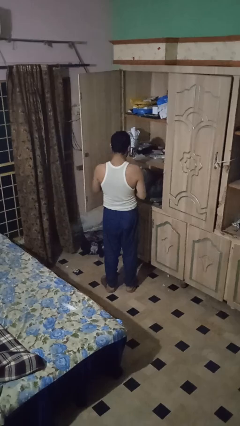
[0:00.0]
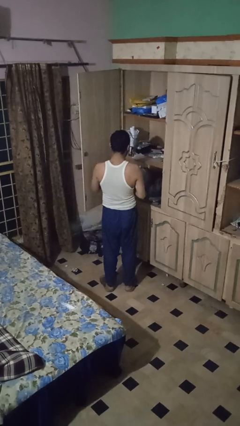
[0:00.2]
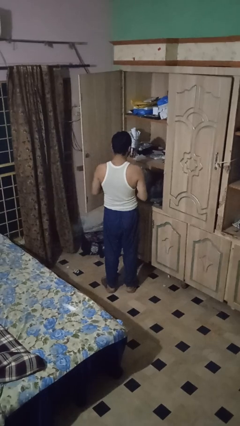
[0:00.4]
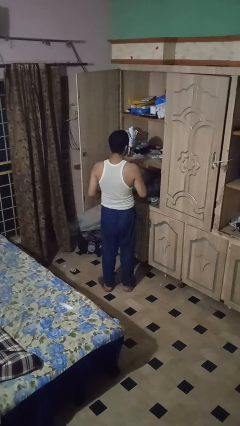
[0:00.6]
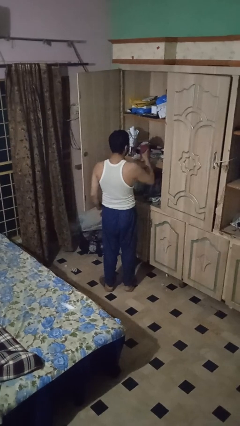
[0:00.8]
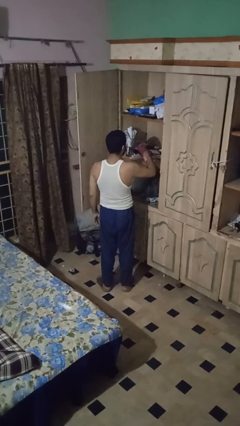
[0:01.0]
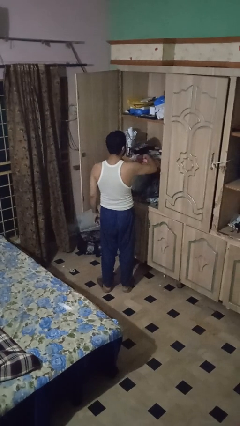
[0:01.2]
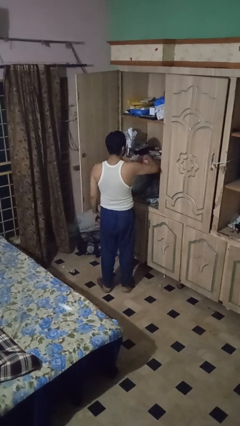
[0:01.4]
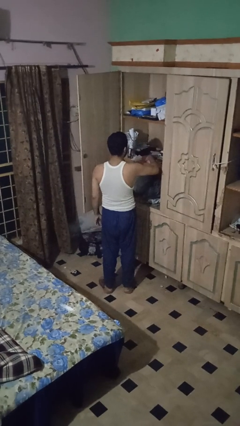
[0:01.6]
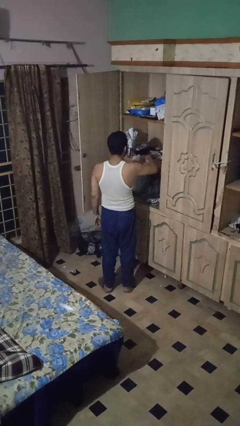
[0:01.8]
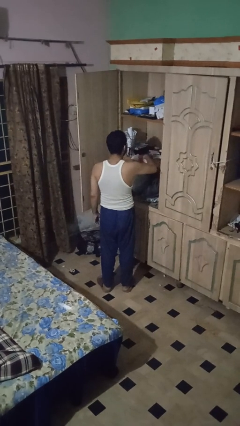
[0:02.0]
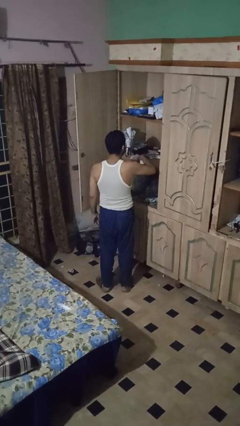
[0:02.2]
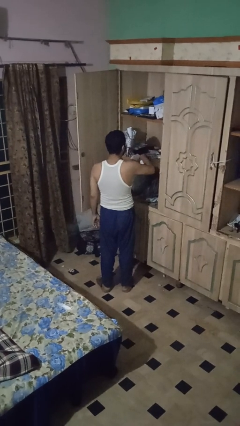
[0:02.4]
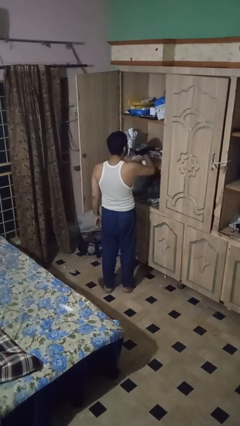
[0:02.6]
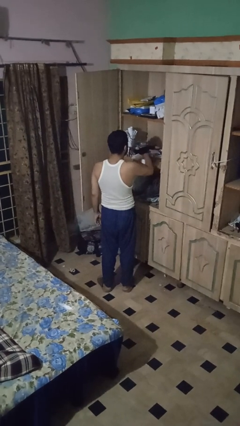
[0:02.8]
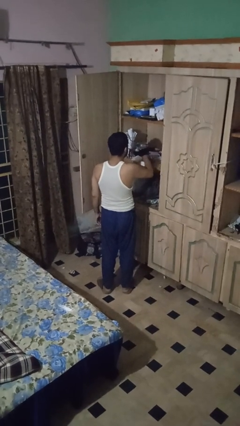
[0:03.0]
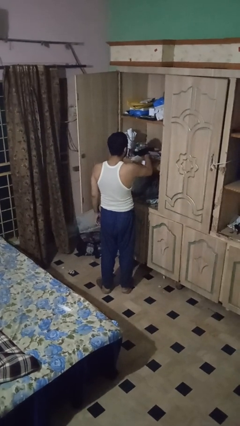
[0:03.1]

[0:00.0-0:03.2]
person dusts furniture

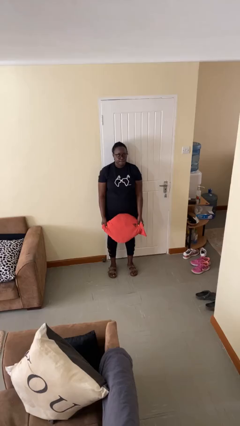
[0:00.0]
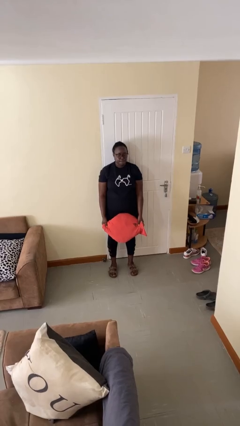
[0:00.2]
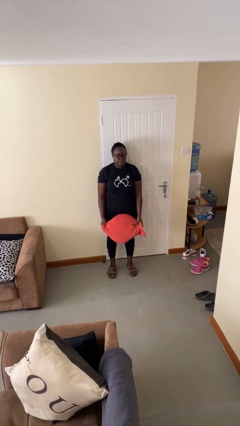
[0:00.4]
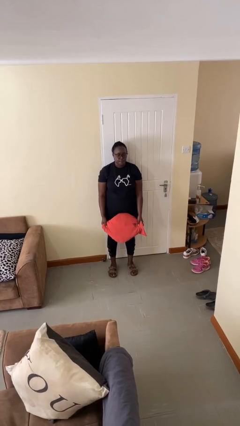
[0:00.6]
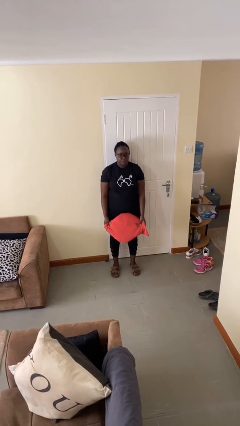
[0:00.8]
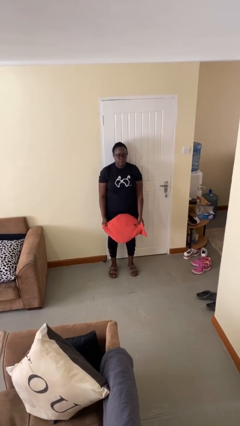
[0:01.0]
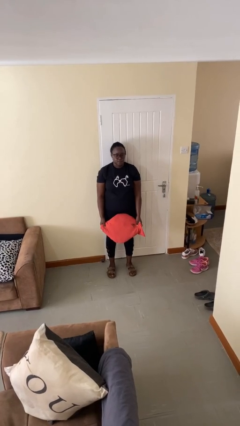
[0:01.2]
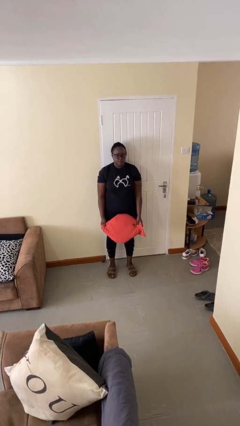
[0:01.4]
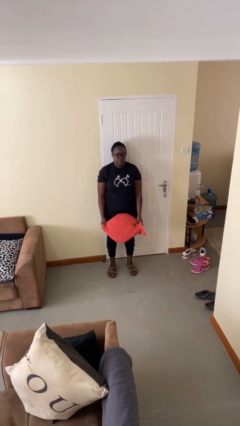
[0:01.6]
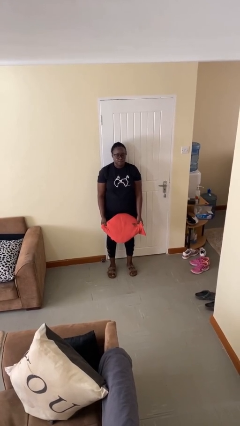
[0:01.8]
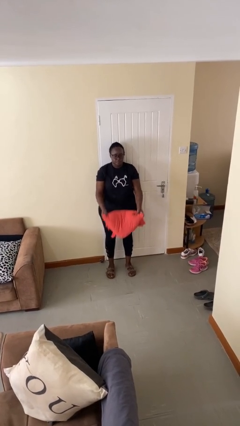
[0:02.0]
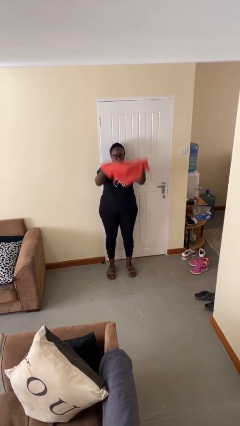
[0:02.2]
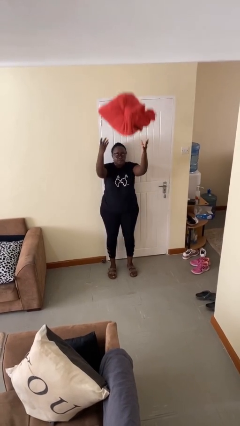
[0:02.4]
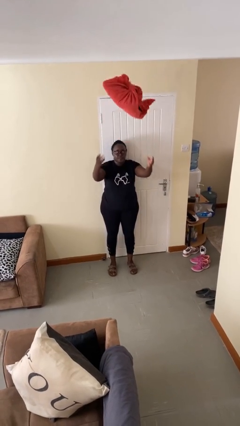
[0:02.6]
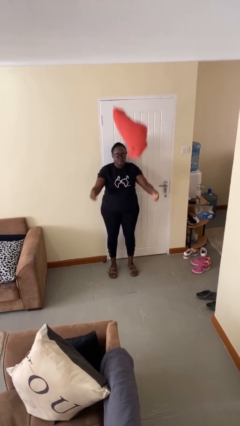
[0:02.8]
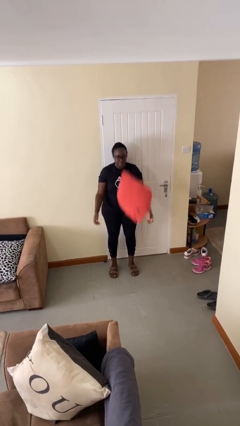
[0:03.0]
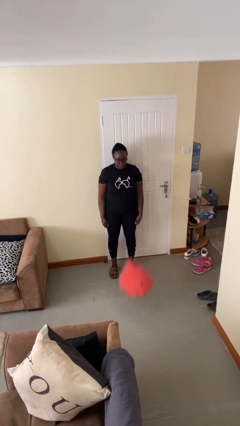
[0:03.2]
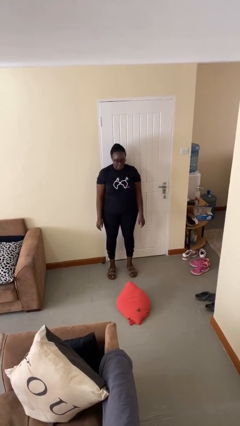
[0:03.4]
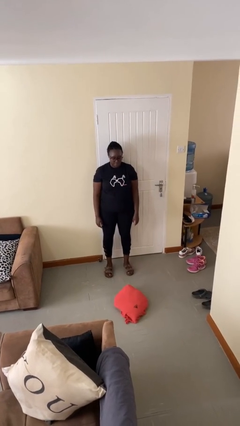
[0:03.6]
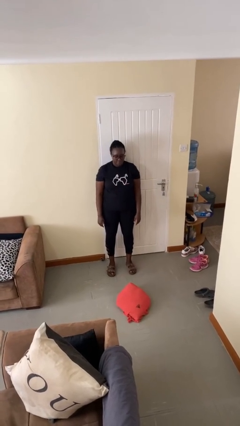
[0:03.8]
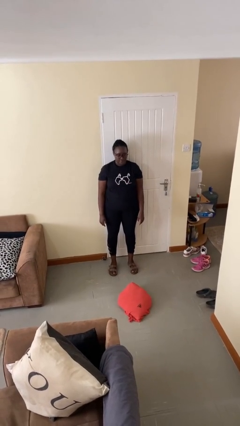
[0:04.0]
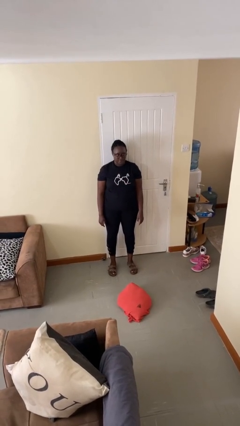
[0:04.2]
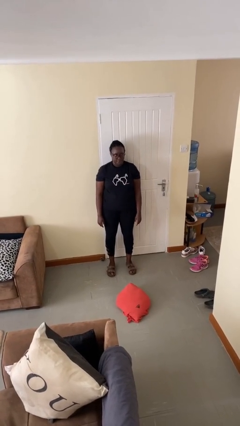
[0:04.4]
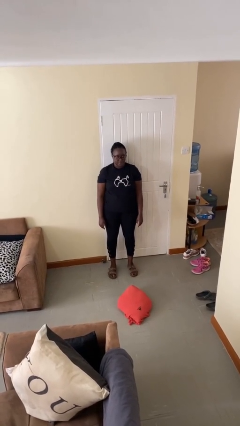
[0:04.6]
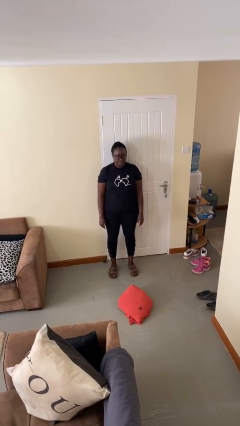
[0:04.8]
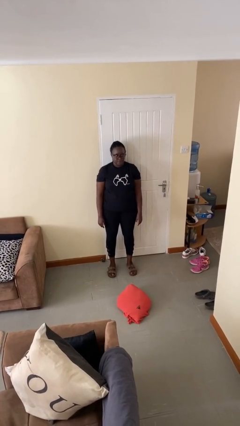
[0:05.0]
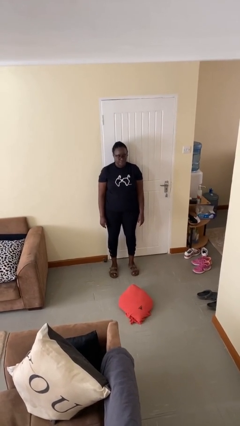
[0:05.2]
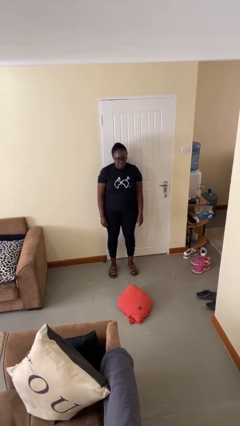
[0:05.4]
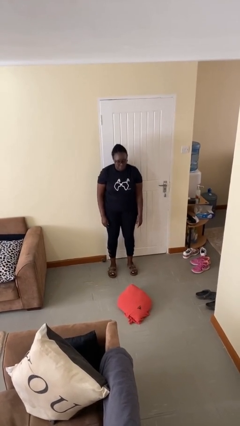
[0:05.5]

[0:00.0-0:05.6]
person throws object into air

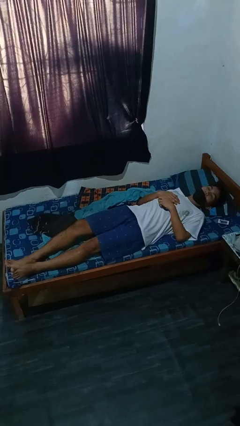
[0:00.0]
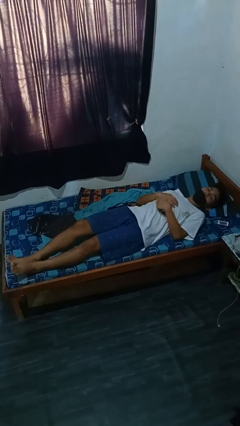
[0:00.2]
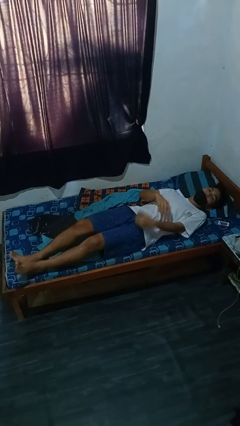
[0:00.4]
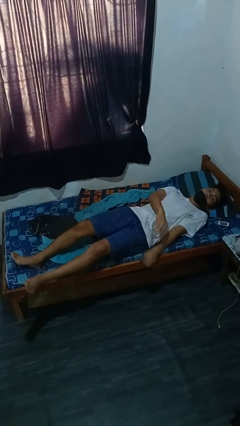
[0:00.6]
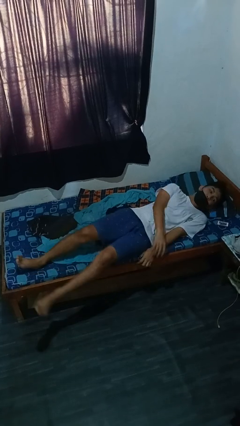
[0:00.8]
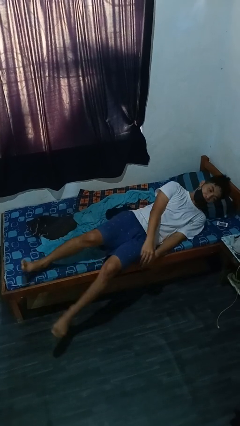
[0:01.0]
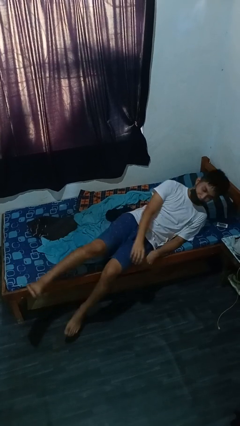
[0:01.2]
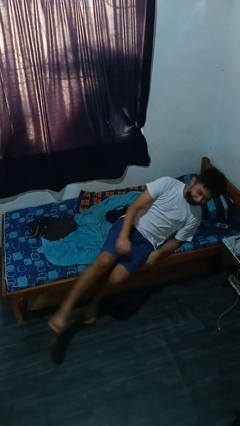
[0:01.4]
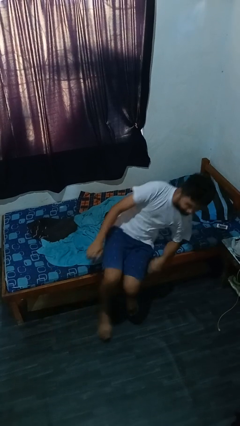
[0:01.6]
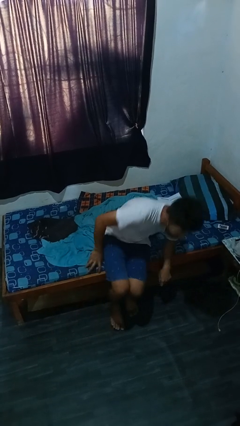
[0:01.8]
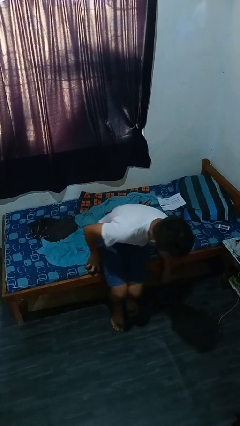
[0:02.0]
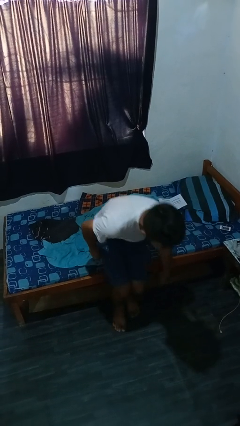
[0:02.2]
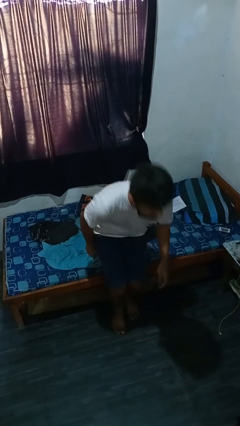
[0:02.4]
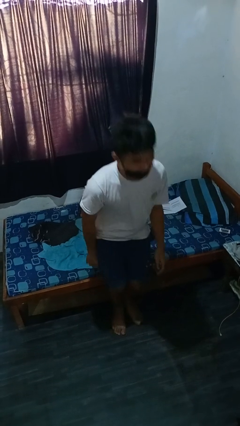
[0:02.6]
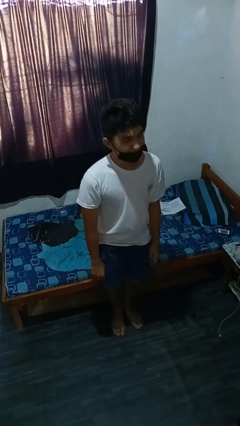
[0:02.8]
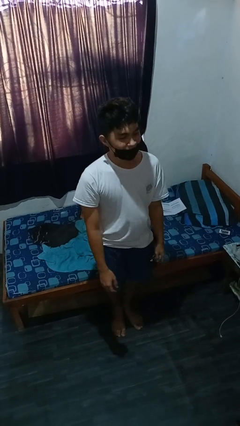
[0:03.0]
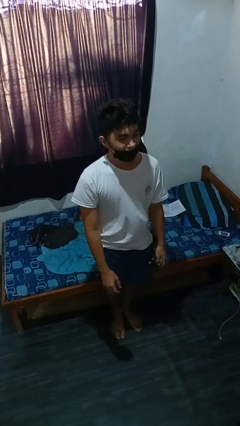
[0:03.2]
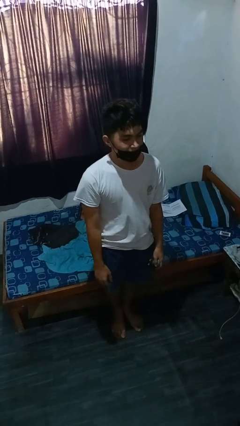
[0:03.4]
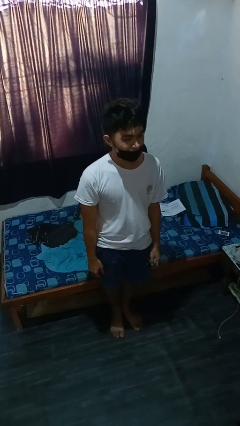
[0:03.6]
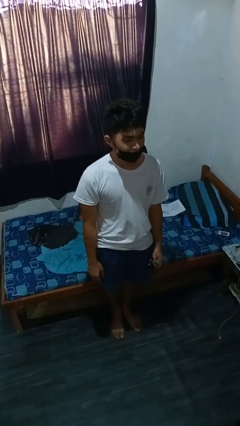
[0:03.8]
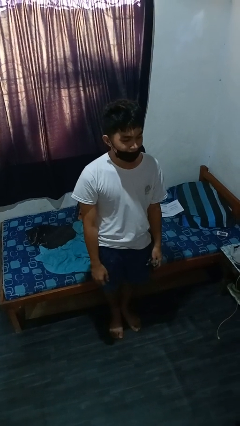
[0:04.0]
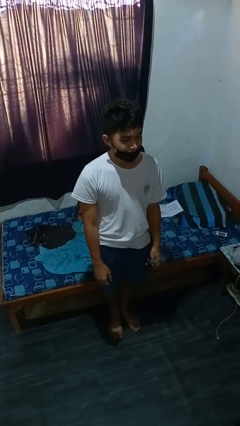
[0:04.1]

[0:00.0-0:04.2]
person stands up

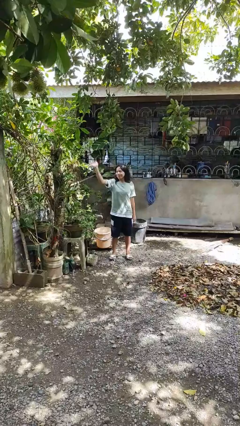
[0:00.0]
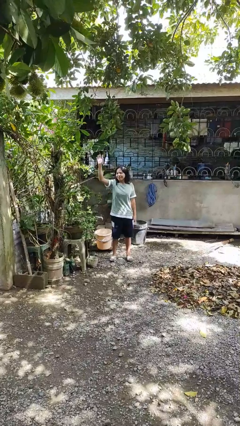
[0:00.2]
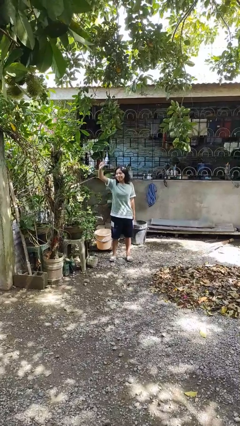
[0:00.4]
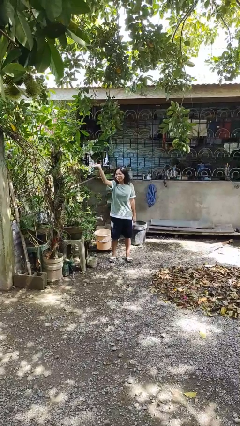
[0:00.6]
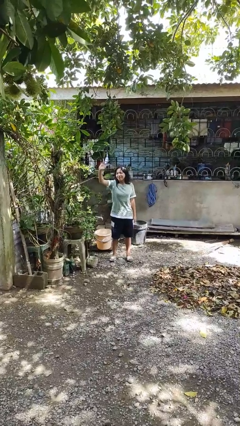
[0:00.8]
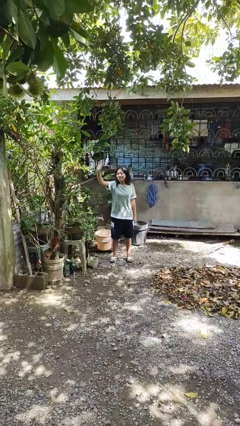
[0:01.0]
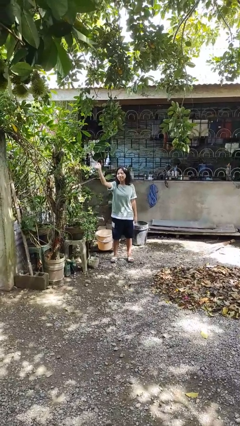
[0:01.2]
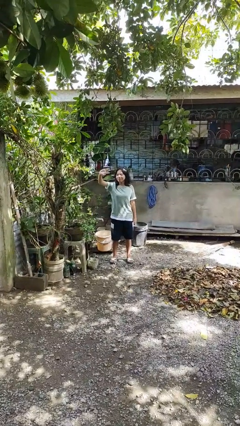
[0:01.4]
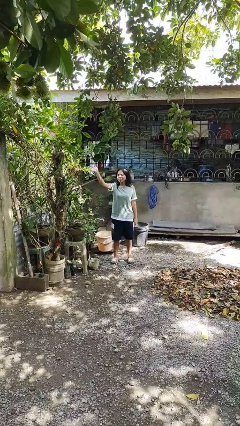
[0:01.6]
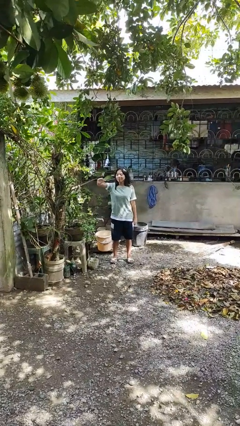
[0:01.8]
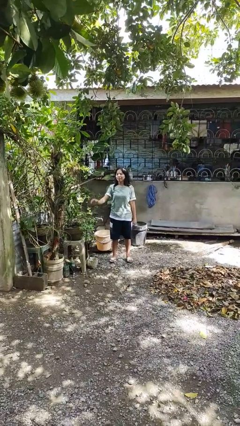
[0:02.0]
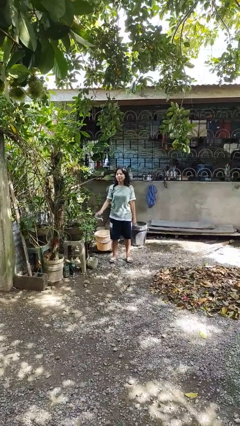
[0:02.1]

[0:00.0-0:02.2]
person waves at person

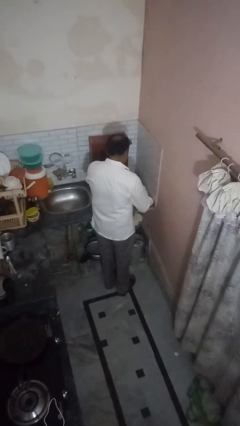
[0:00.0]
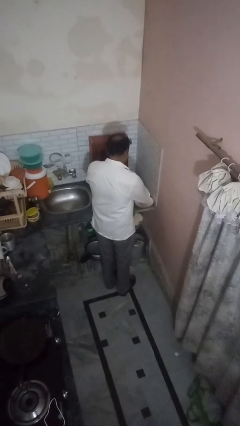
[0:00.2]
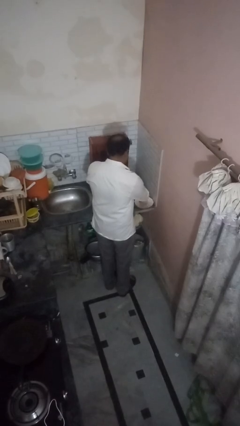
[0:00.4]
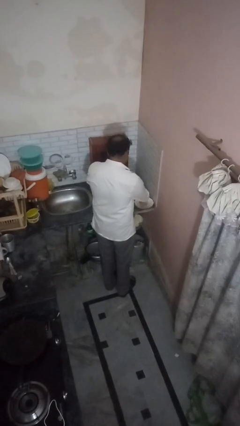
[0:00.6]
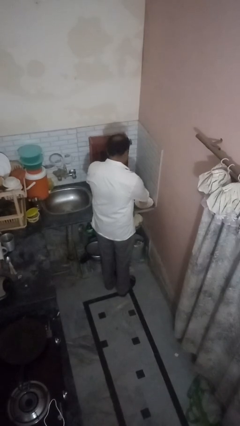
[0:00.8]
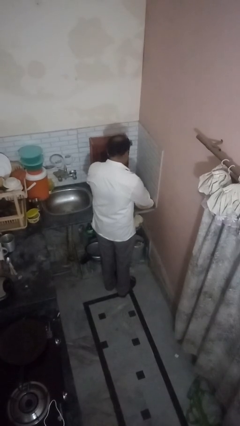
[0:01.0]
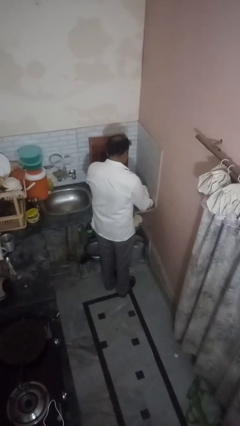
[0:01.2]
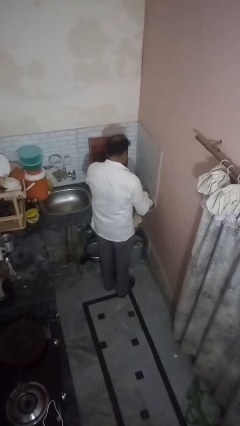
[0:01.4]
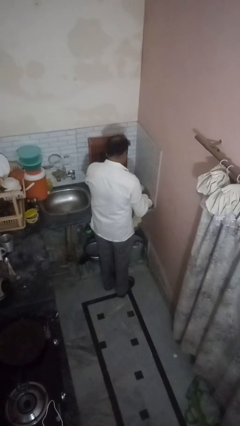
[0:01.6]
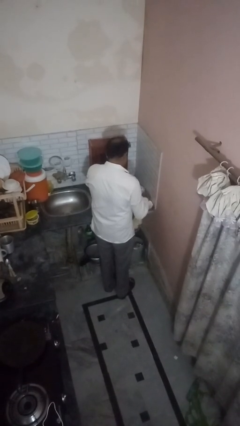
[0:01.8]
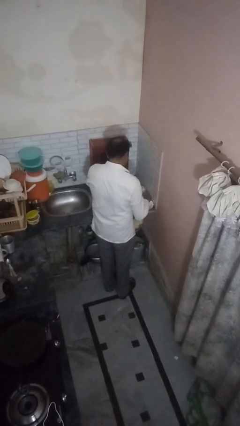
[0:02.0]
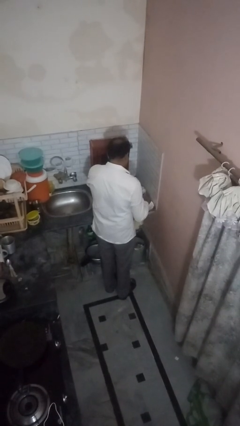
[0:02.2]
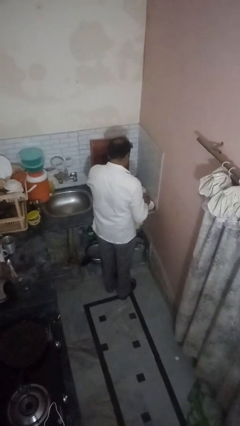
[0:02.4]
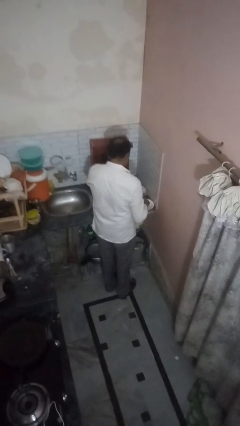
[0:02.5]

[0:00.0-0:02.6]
person pours into bowl
